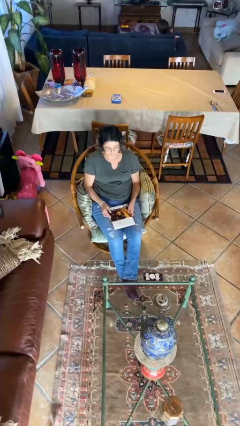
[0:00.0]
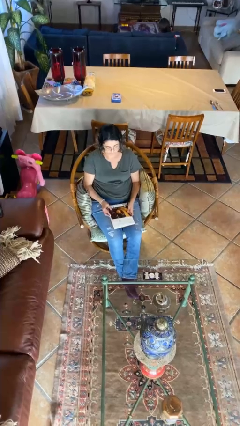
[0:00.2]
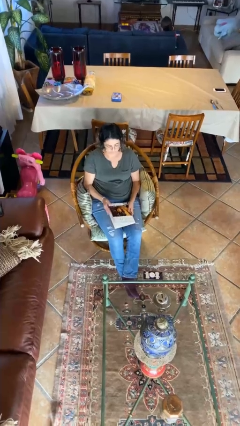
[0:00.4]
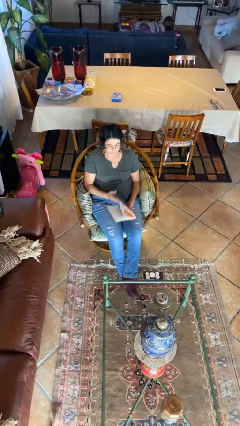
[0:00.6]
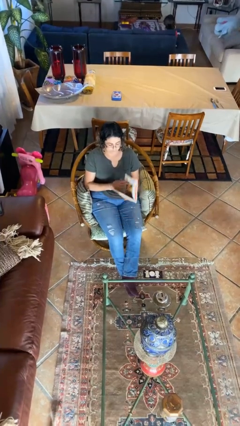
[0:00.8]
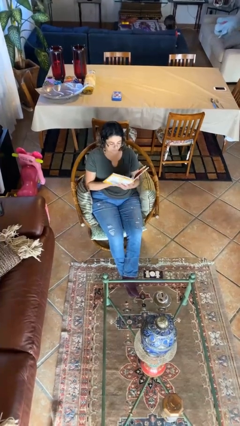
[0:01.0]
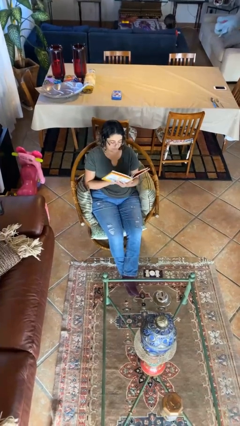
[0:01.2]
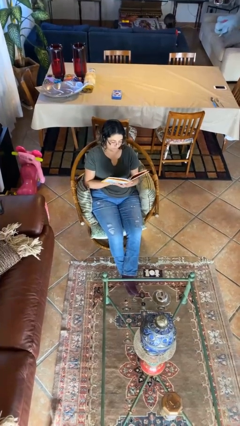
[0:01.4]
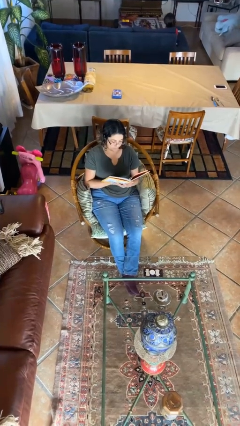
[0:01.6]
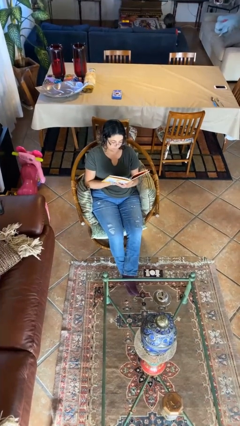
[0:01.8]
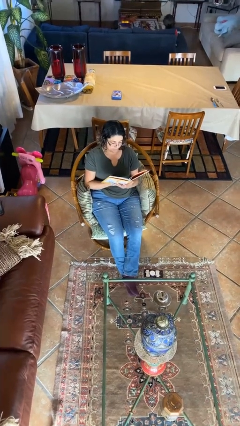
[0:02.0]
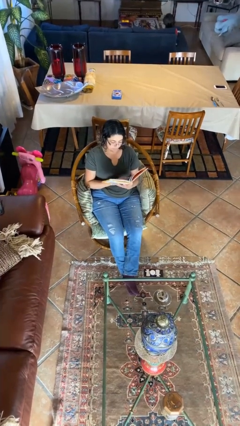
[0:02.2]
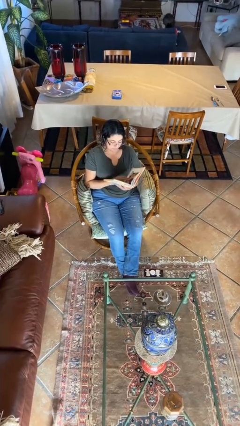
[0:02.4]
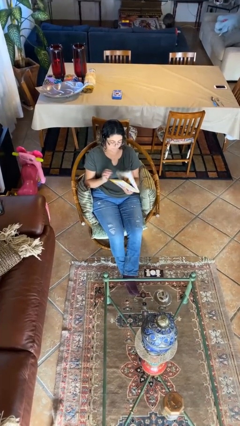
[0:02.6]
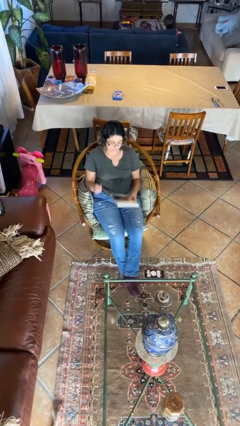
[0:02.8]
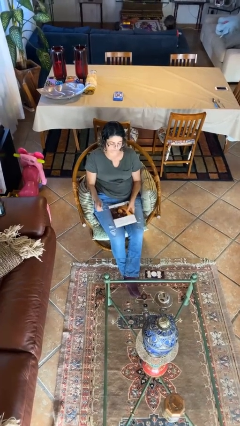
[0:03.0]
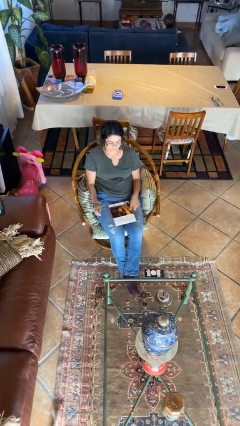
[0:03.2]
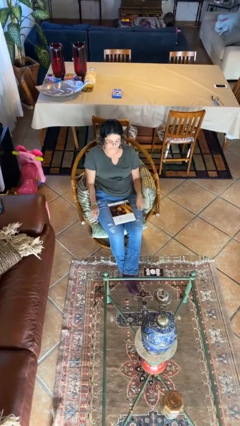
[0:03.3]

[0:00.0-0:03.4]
person reads document

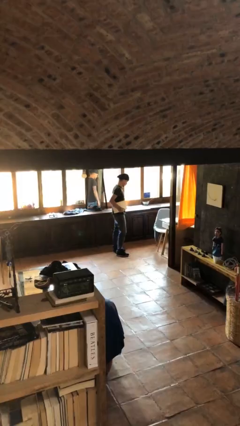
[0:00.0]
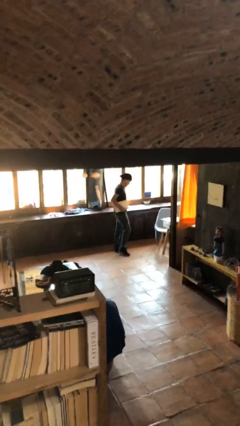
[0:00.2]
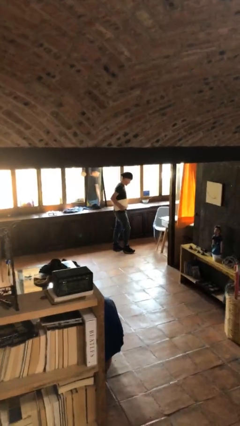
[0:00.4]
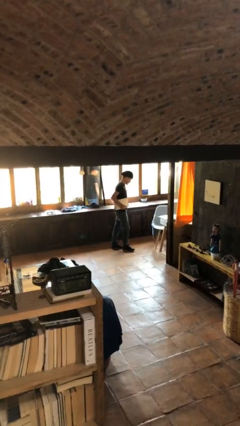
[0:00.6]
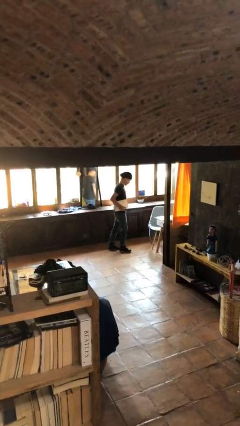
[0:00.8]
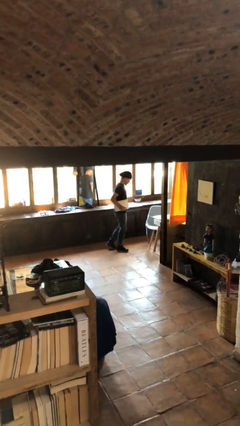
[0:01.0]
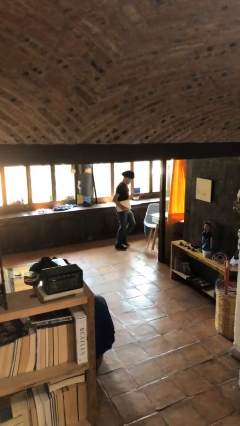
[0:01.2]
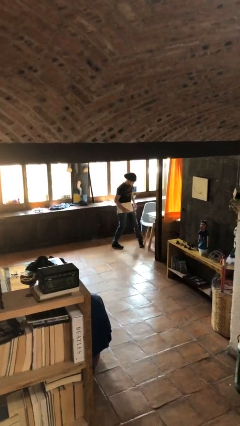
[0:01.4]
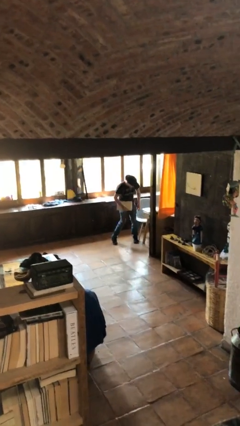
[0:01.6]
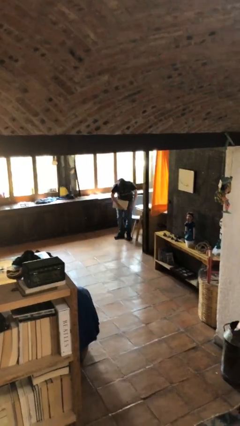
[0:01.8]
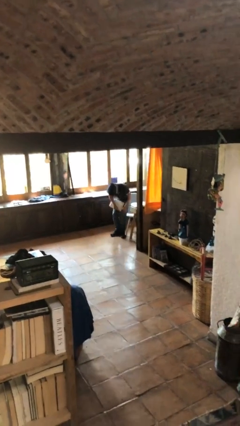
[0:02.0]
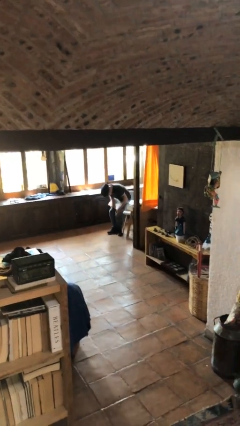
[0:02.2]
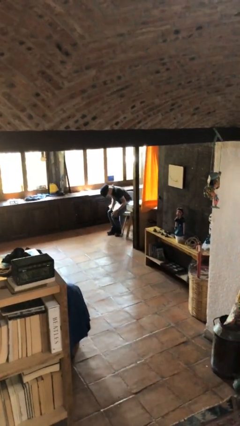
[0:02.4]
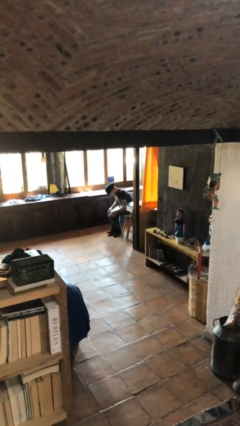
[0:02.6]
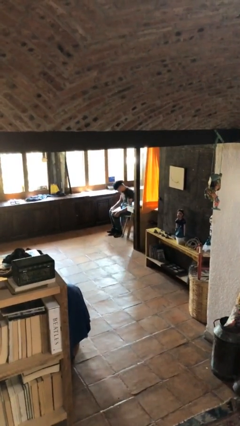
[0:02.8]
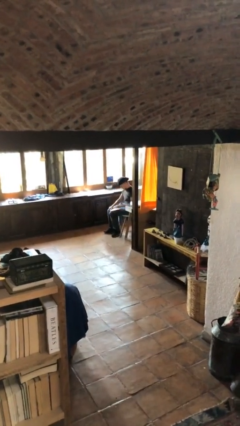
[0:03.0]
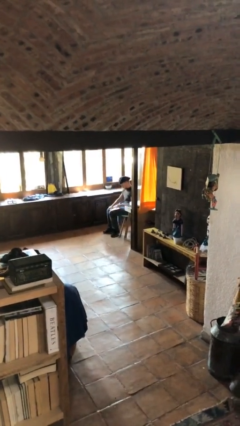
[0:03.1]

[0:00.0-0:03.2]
person sits down

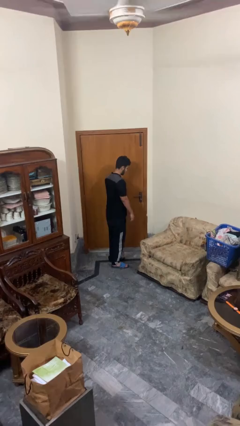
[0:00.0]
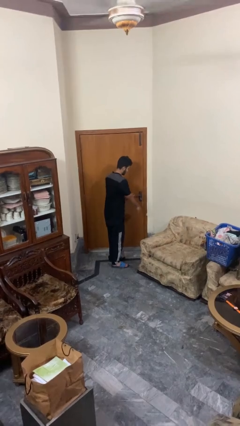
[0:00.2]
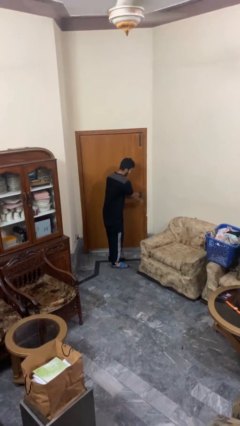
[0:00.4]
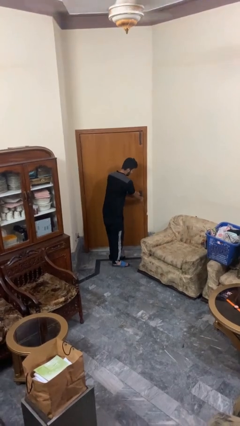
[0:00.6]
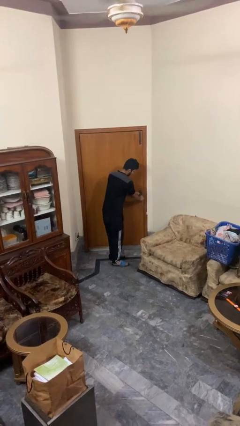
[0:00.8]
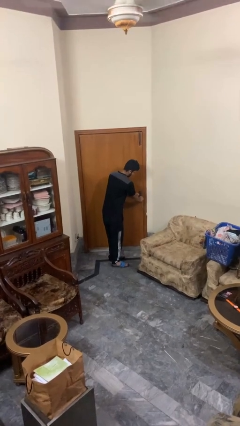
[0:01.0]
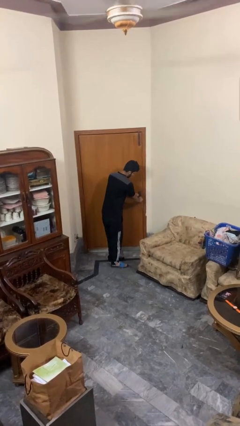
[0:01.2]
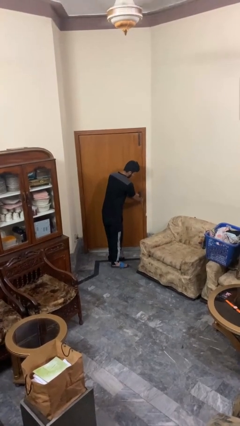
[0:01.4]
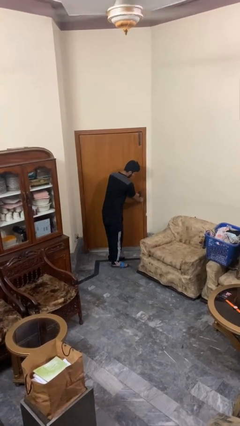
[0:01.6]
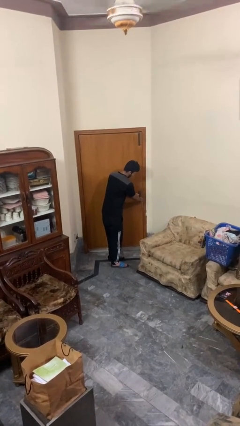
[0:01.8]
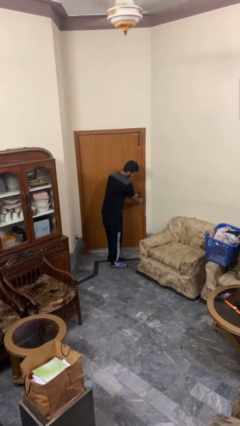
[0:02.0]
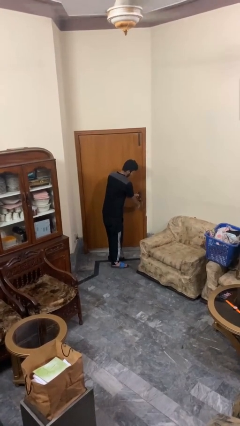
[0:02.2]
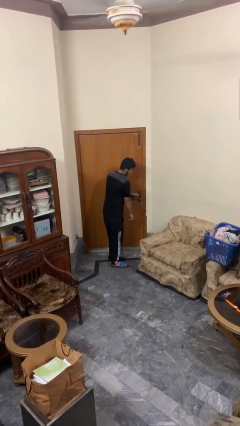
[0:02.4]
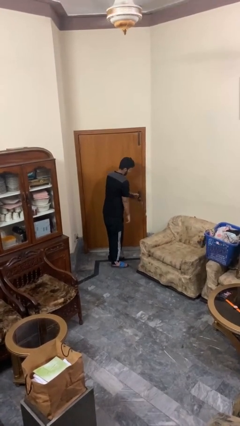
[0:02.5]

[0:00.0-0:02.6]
person unlocks door with keys

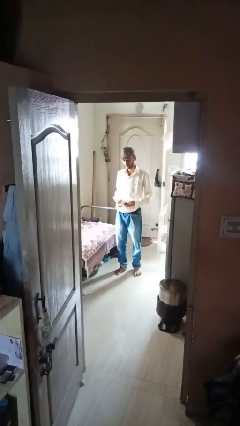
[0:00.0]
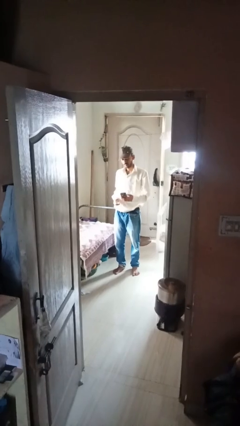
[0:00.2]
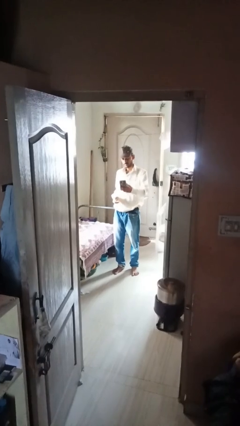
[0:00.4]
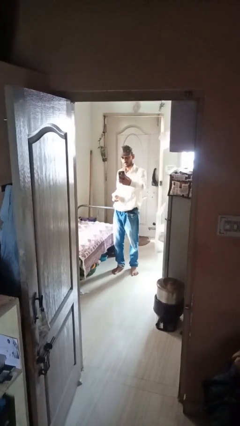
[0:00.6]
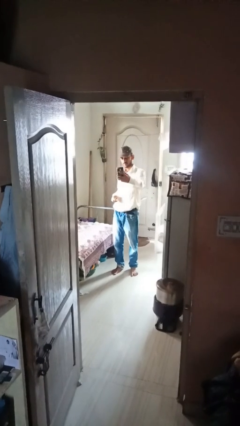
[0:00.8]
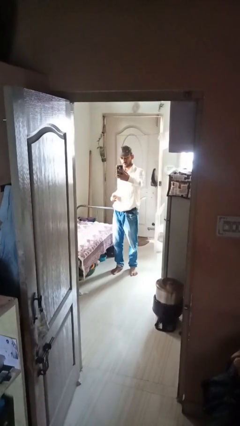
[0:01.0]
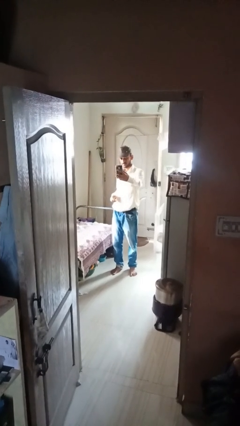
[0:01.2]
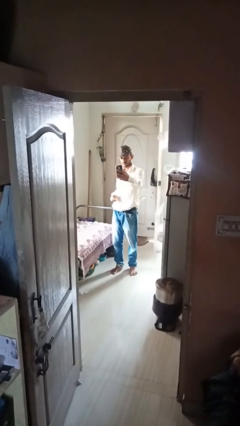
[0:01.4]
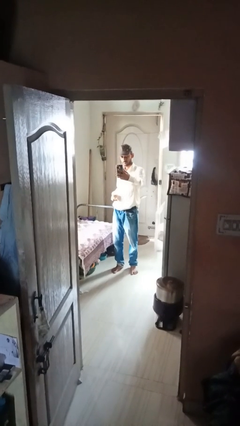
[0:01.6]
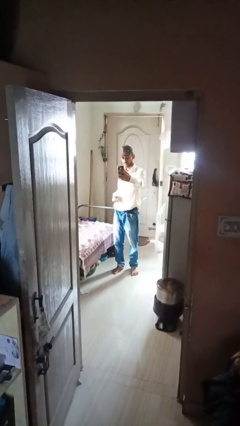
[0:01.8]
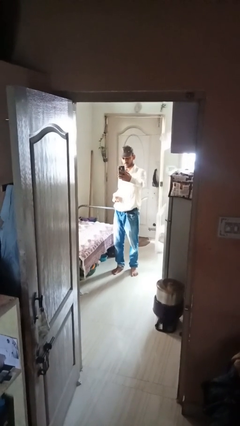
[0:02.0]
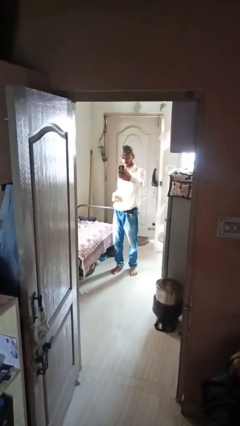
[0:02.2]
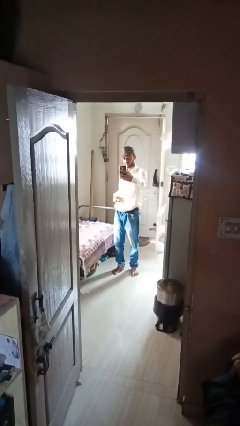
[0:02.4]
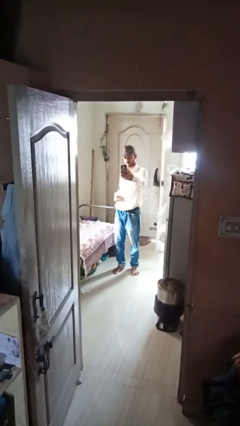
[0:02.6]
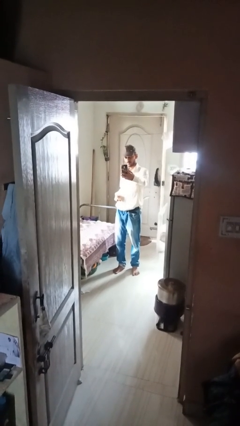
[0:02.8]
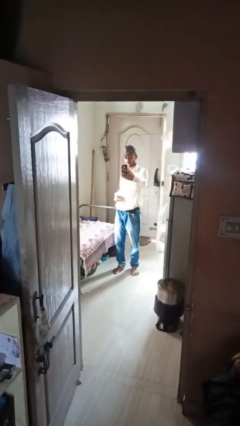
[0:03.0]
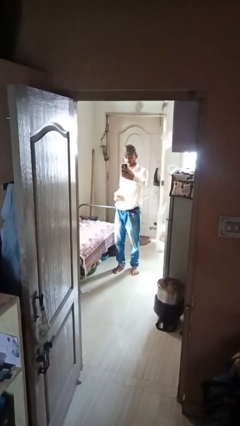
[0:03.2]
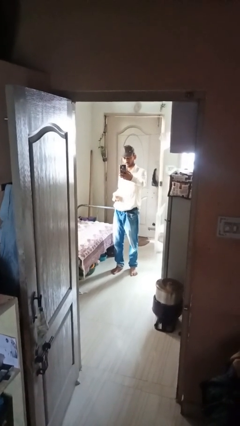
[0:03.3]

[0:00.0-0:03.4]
person takes selfie

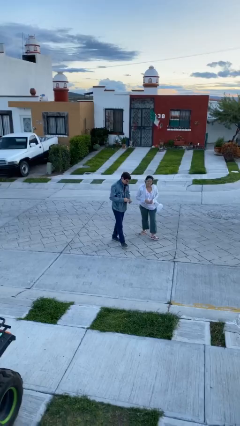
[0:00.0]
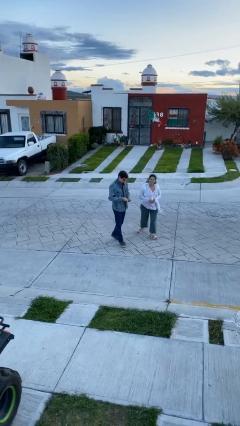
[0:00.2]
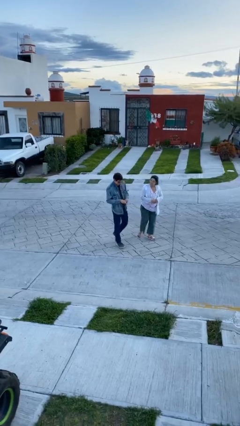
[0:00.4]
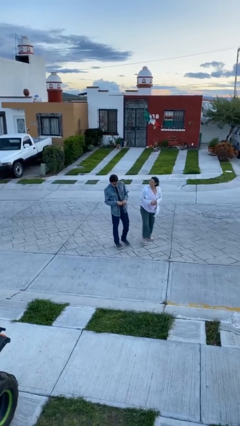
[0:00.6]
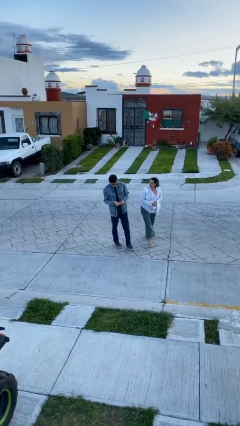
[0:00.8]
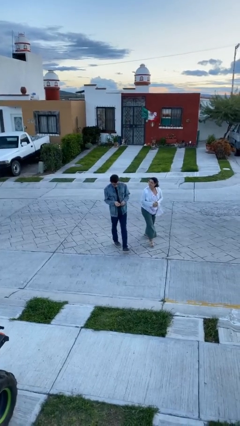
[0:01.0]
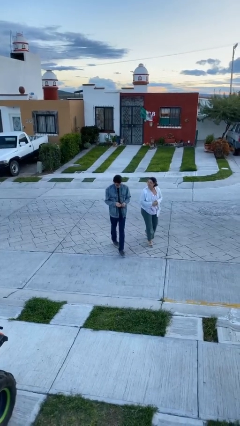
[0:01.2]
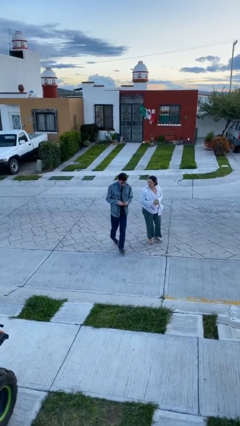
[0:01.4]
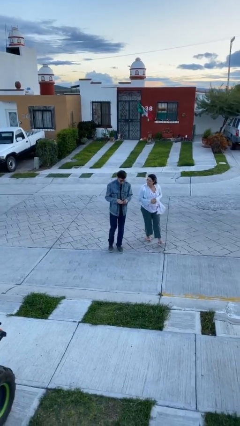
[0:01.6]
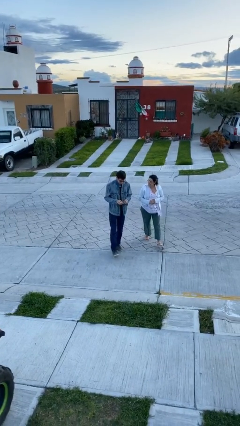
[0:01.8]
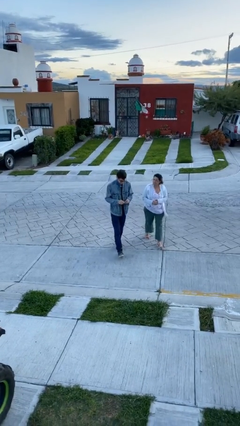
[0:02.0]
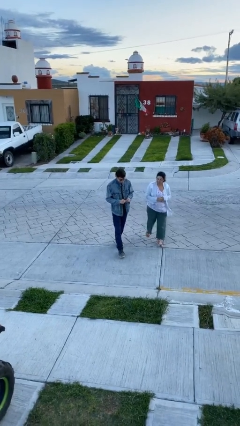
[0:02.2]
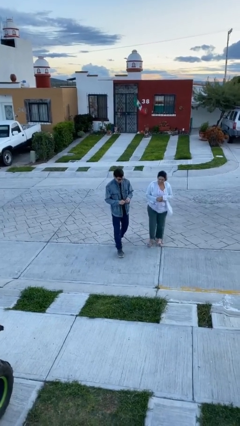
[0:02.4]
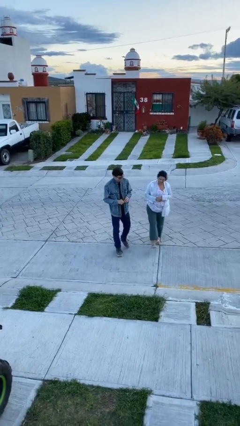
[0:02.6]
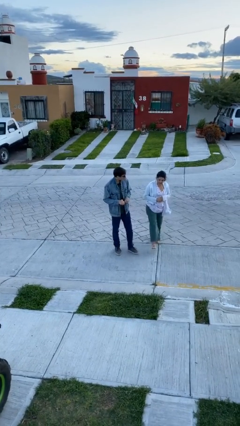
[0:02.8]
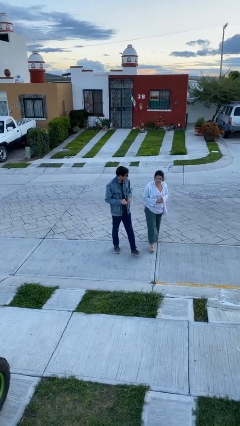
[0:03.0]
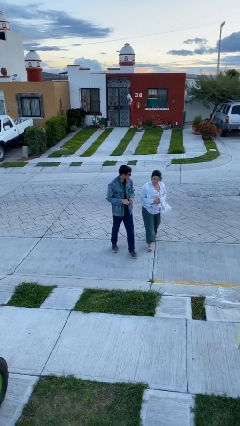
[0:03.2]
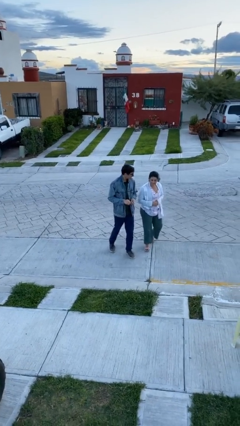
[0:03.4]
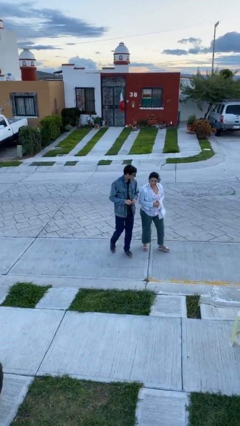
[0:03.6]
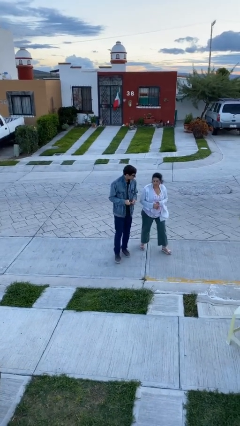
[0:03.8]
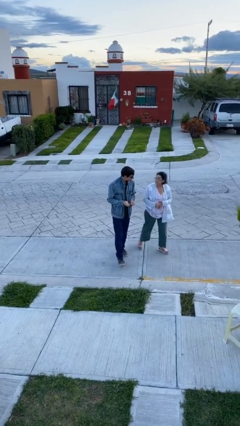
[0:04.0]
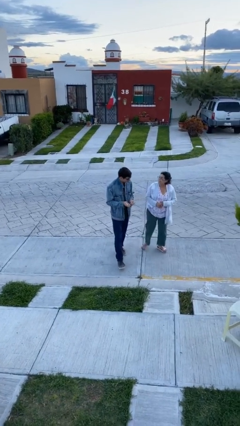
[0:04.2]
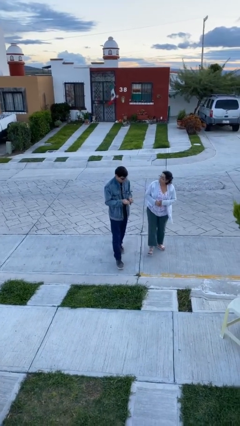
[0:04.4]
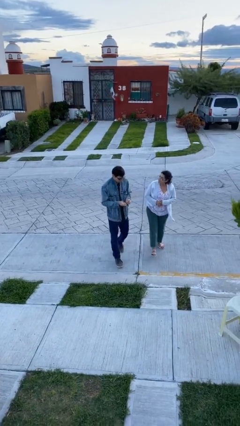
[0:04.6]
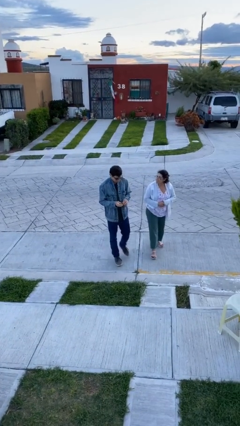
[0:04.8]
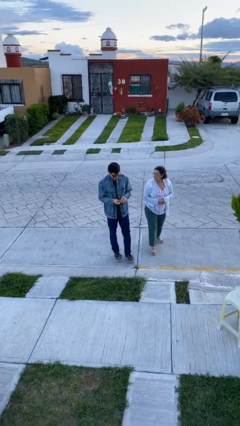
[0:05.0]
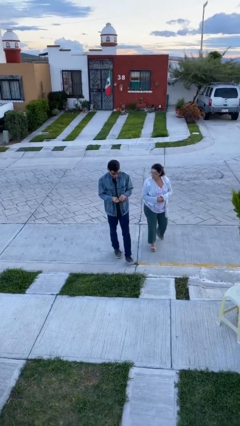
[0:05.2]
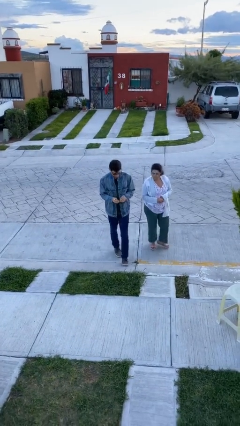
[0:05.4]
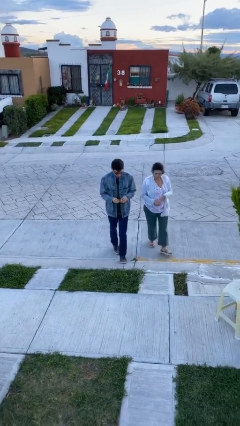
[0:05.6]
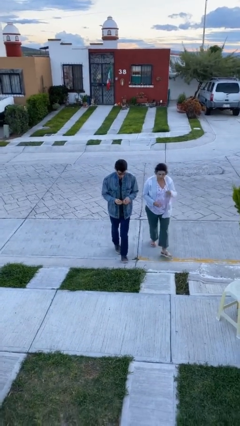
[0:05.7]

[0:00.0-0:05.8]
person talks to person
